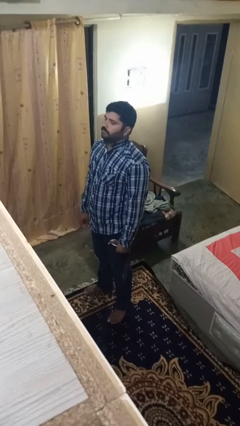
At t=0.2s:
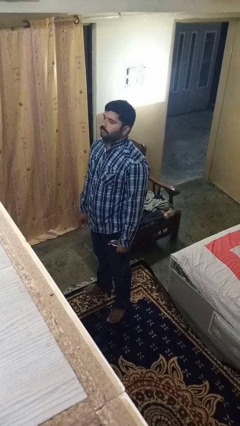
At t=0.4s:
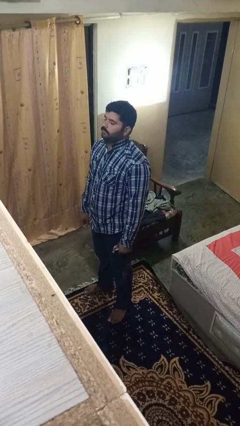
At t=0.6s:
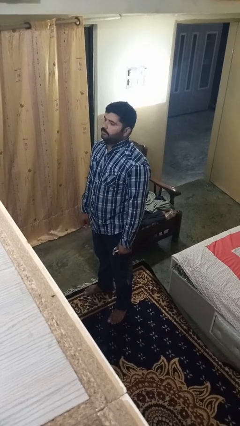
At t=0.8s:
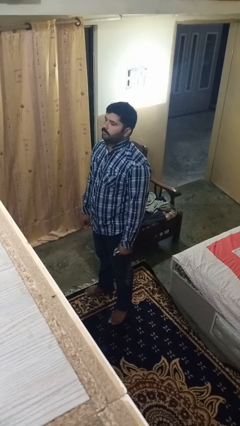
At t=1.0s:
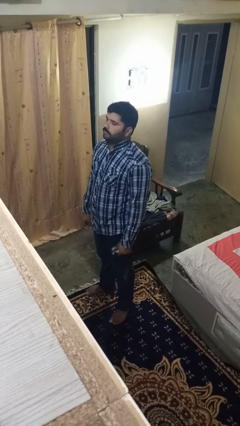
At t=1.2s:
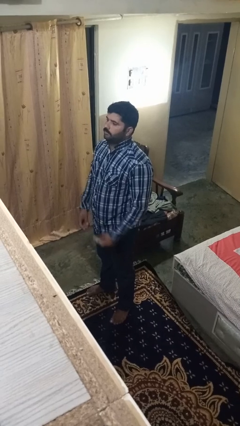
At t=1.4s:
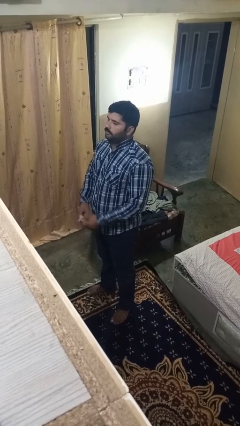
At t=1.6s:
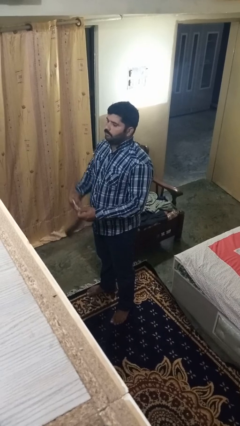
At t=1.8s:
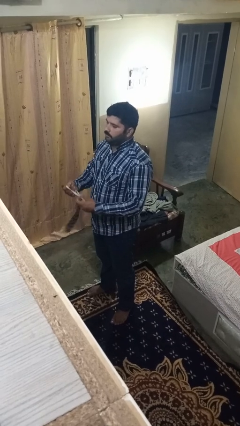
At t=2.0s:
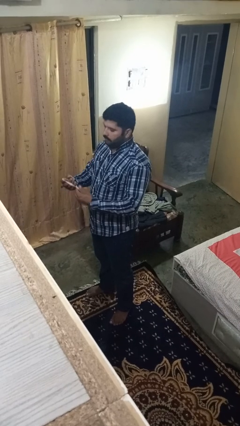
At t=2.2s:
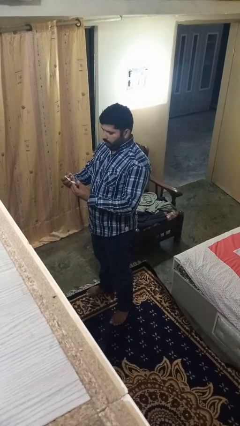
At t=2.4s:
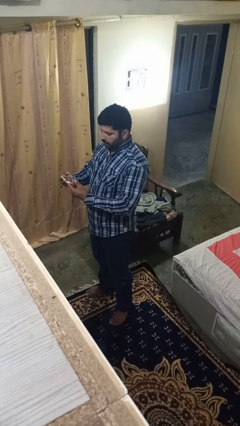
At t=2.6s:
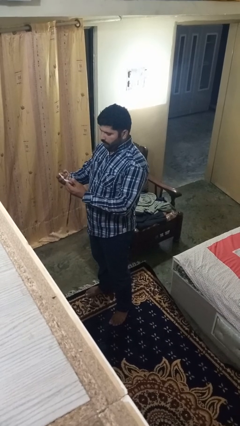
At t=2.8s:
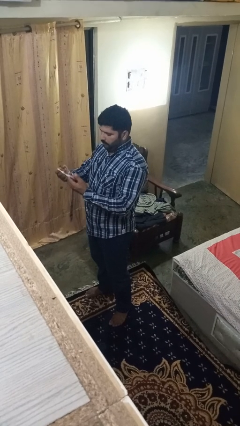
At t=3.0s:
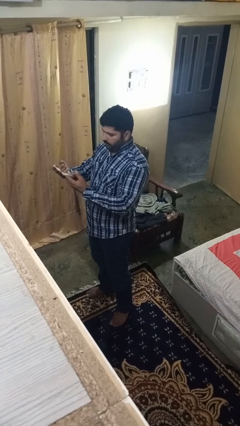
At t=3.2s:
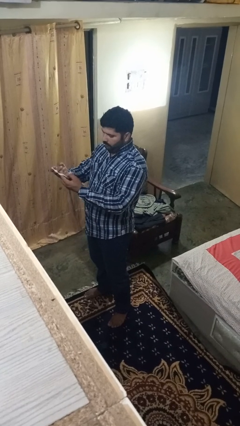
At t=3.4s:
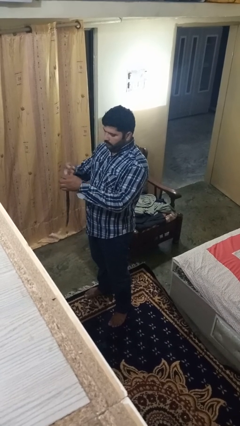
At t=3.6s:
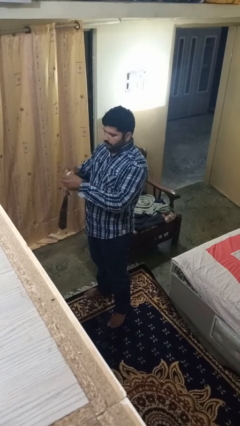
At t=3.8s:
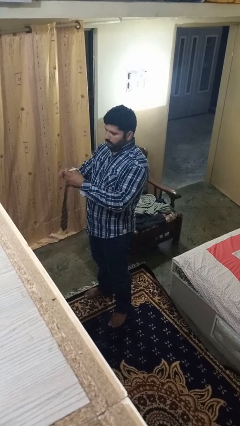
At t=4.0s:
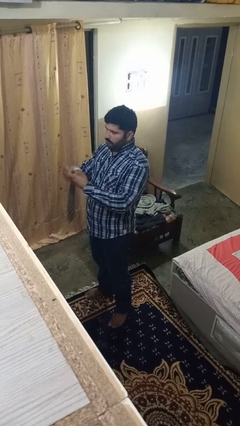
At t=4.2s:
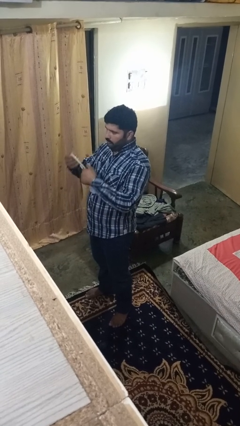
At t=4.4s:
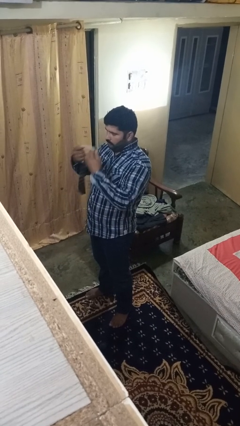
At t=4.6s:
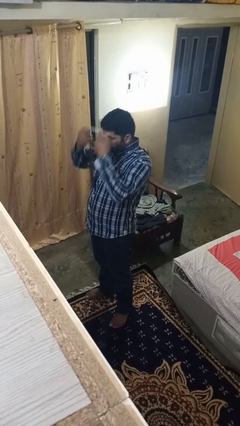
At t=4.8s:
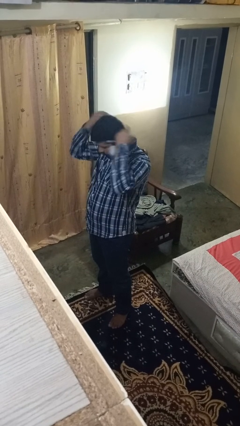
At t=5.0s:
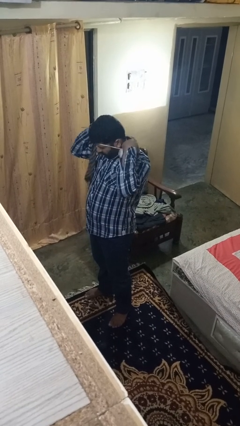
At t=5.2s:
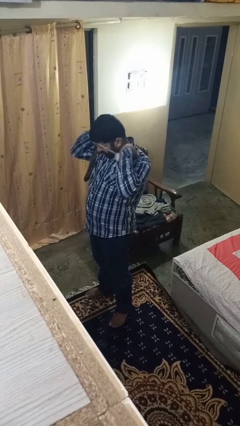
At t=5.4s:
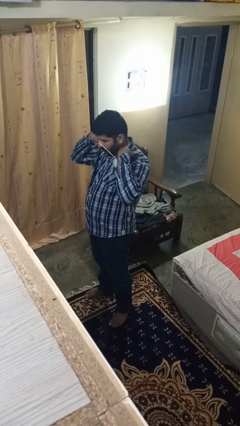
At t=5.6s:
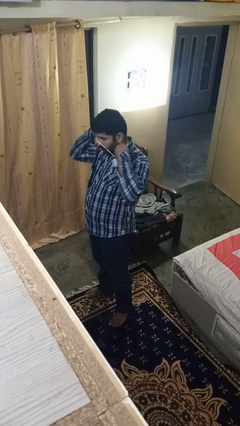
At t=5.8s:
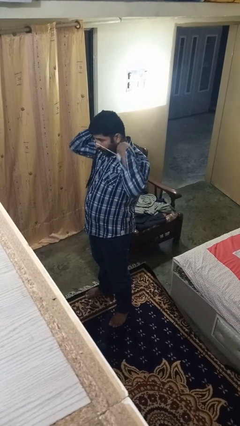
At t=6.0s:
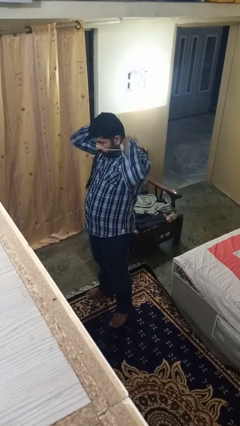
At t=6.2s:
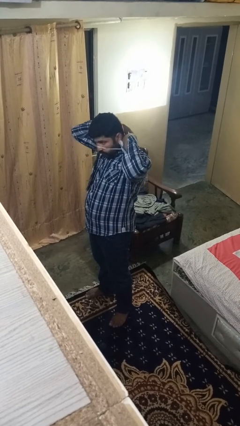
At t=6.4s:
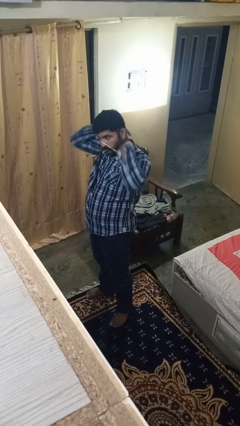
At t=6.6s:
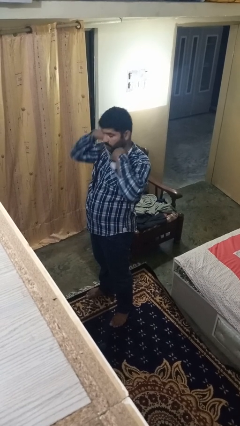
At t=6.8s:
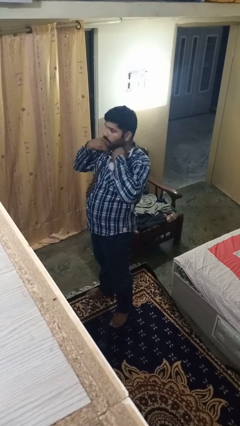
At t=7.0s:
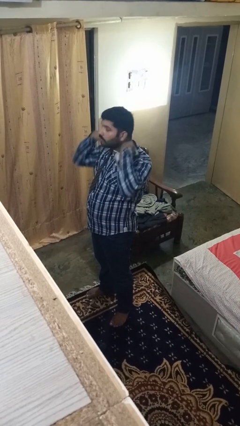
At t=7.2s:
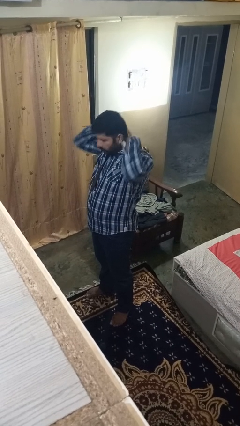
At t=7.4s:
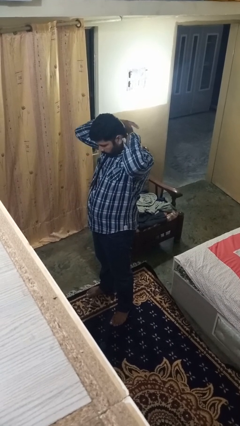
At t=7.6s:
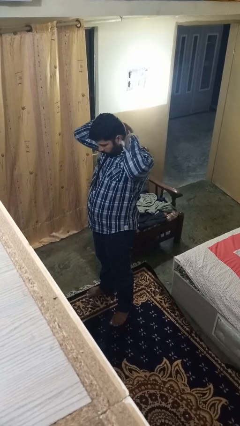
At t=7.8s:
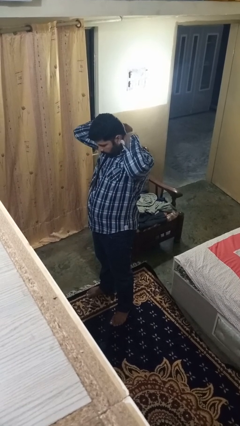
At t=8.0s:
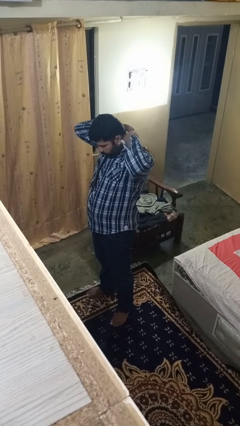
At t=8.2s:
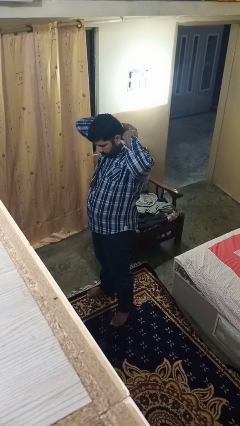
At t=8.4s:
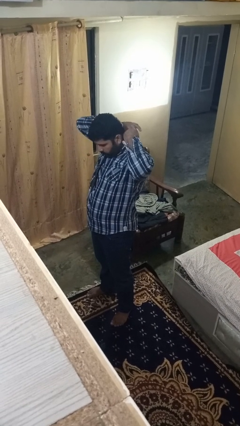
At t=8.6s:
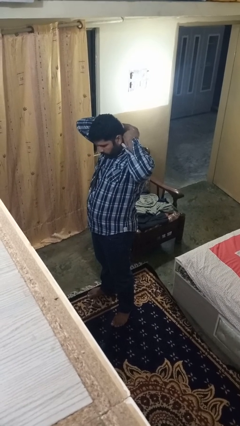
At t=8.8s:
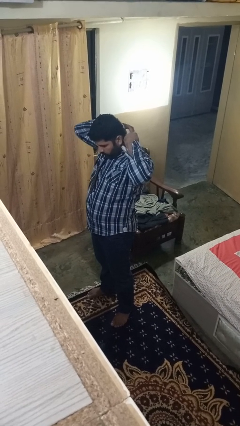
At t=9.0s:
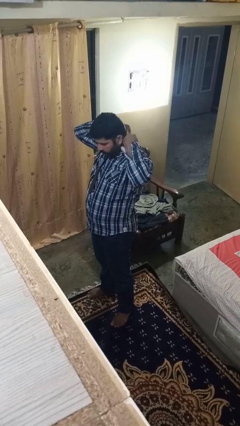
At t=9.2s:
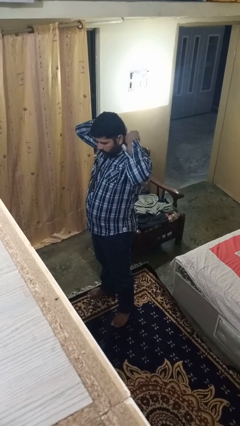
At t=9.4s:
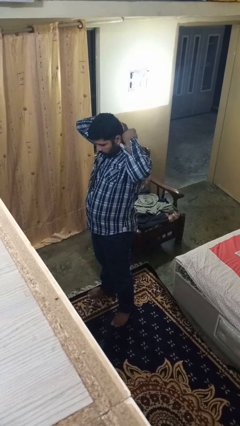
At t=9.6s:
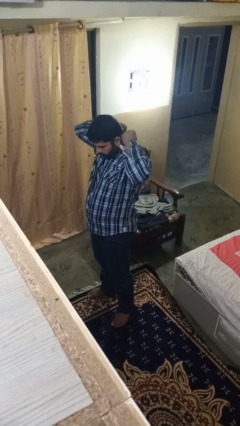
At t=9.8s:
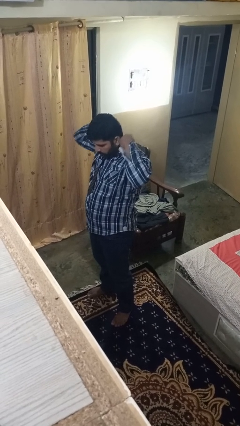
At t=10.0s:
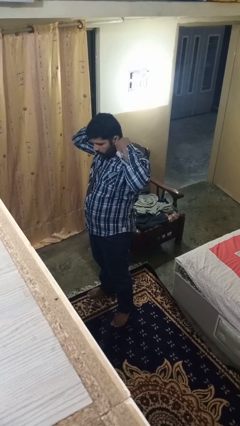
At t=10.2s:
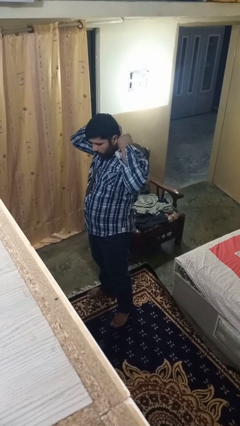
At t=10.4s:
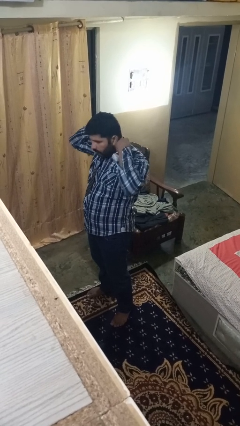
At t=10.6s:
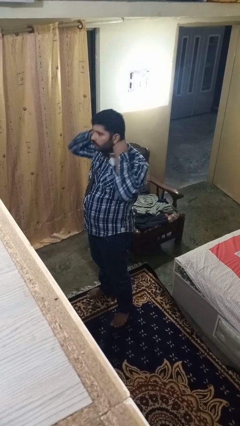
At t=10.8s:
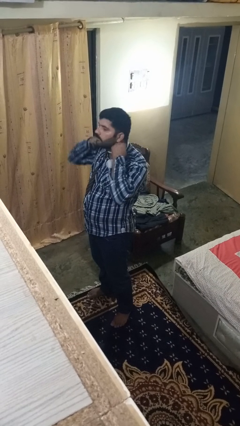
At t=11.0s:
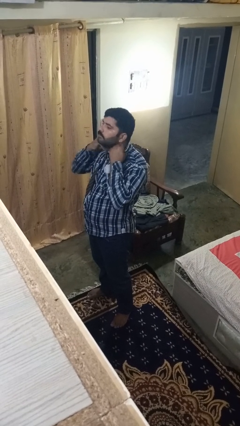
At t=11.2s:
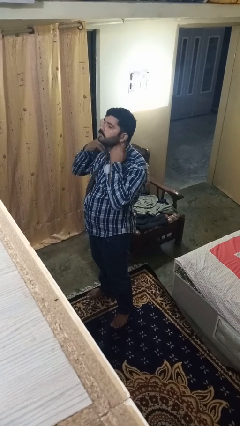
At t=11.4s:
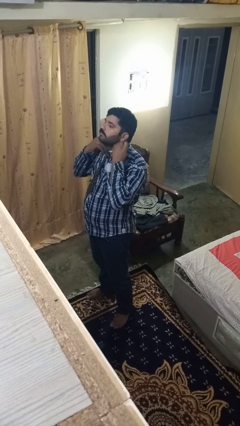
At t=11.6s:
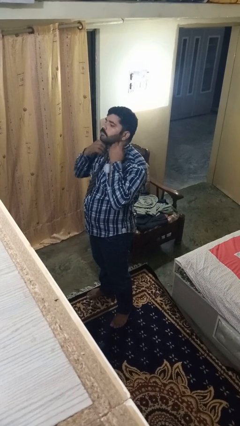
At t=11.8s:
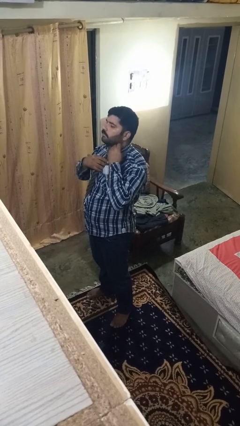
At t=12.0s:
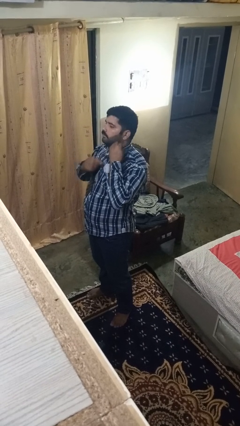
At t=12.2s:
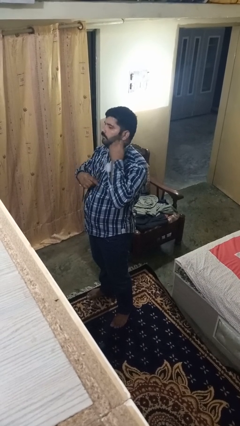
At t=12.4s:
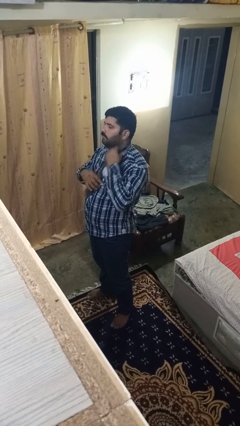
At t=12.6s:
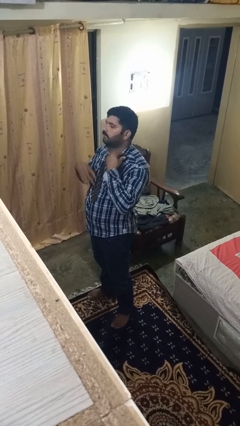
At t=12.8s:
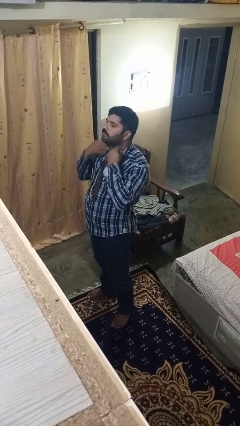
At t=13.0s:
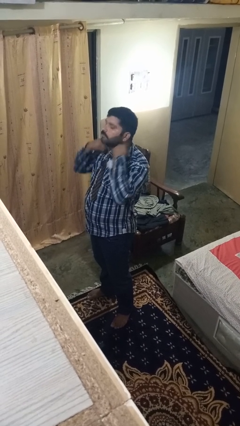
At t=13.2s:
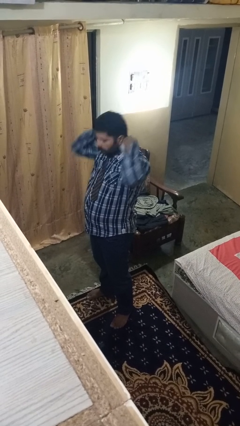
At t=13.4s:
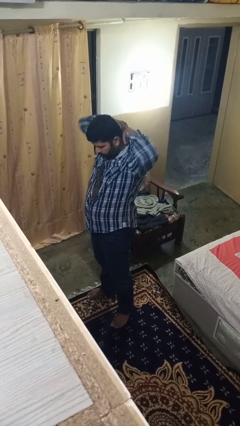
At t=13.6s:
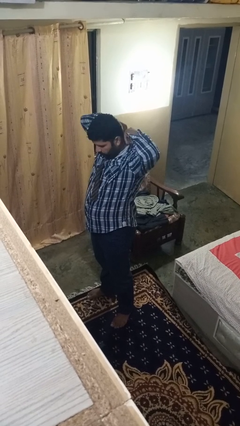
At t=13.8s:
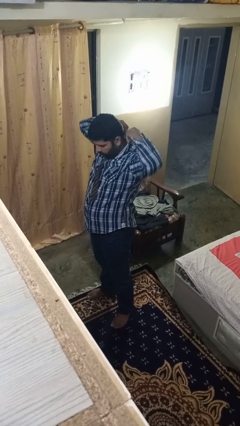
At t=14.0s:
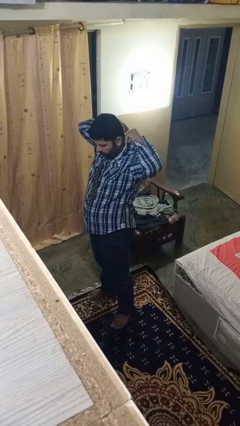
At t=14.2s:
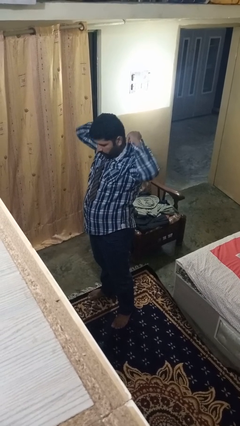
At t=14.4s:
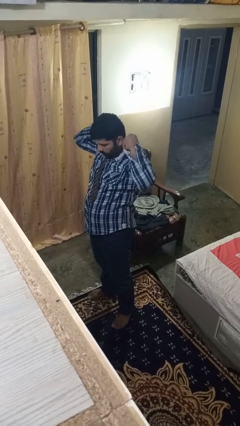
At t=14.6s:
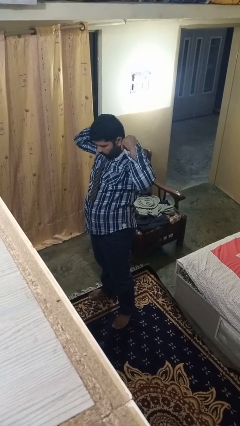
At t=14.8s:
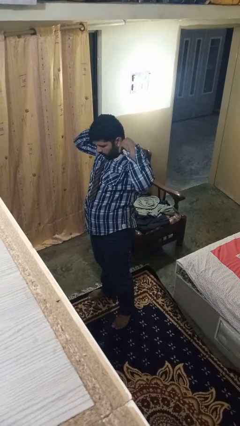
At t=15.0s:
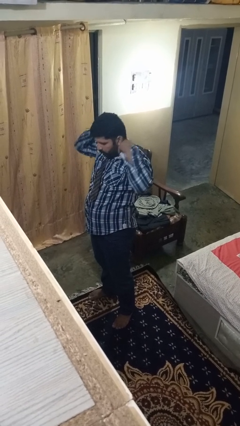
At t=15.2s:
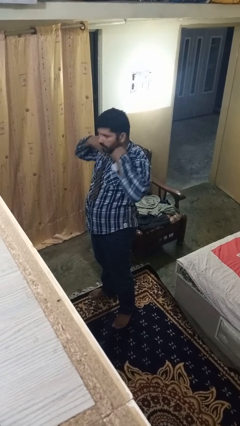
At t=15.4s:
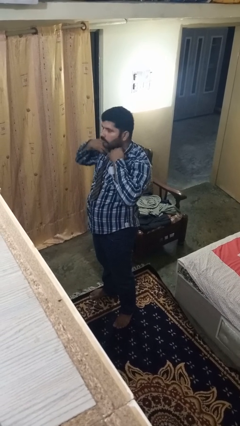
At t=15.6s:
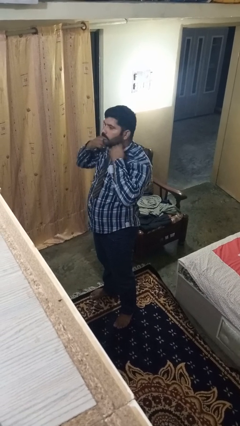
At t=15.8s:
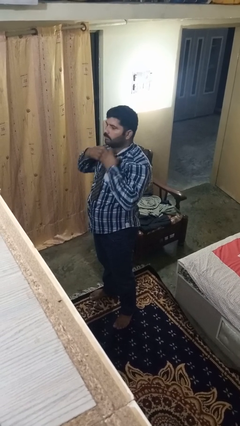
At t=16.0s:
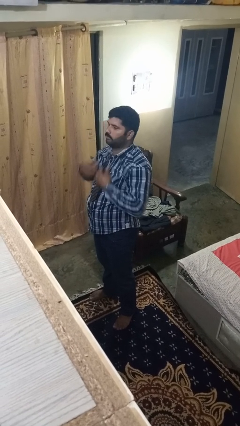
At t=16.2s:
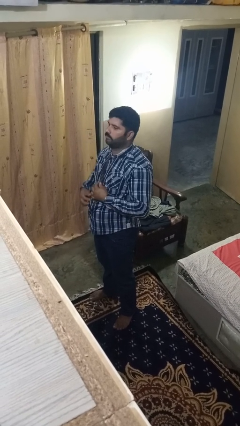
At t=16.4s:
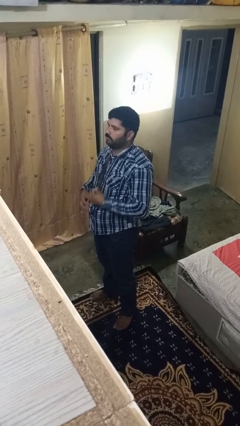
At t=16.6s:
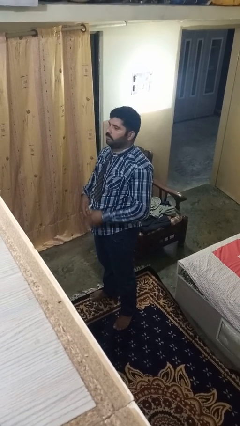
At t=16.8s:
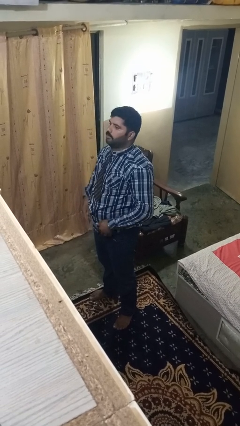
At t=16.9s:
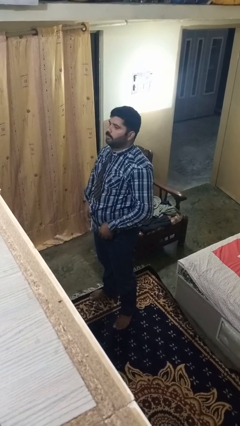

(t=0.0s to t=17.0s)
person puts on necktie

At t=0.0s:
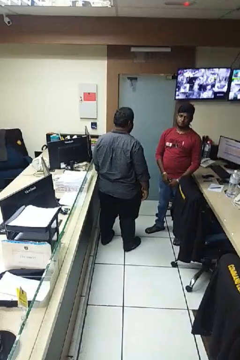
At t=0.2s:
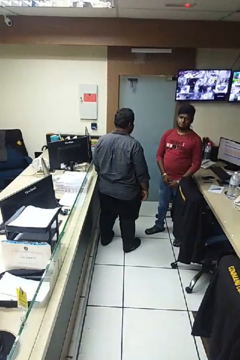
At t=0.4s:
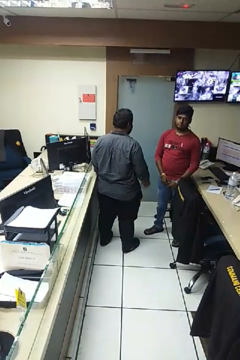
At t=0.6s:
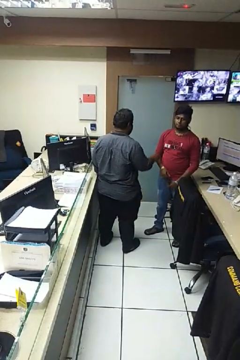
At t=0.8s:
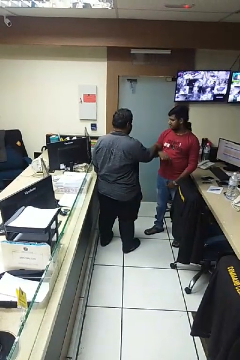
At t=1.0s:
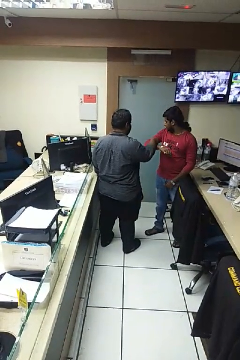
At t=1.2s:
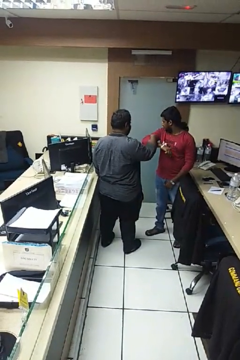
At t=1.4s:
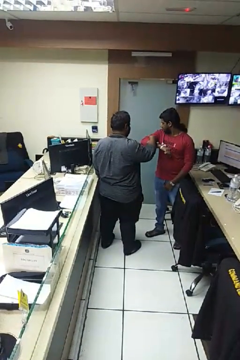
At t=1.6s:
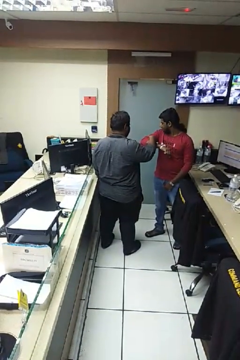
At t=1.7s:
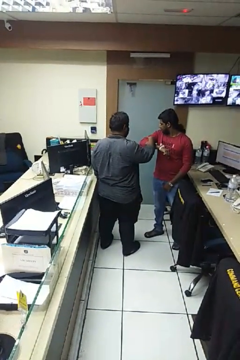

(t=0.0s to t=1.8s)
person grabs person by bicep
